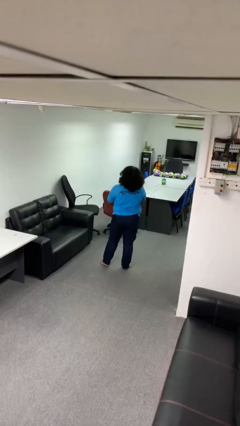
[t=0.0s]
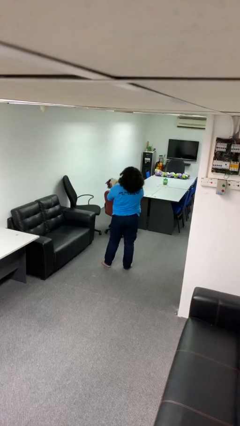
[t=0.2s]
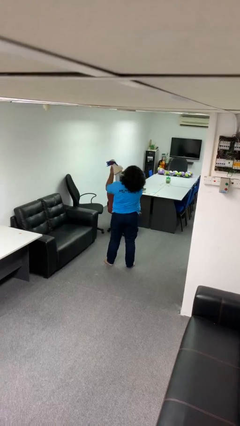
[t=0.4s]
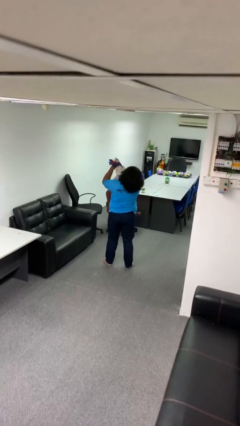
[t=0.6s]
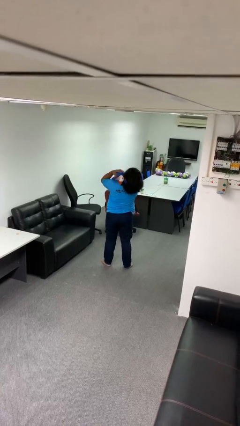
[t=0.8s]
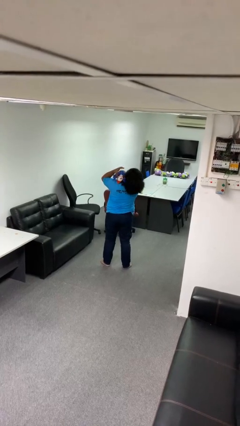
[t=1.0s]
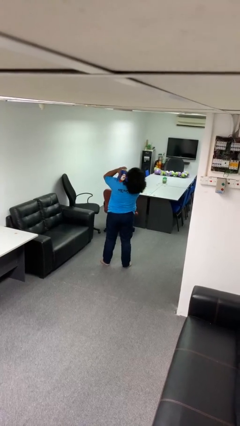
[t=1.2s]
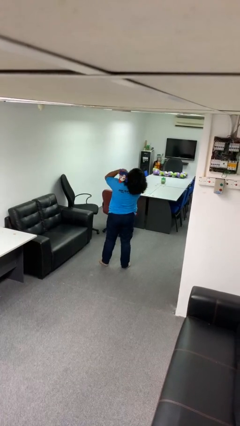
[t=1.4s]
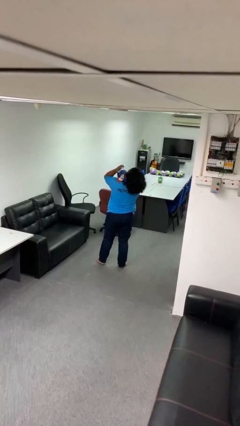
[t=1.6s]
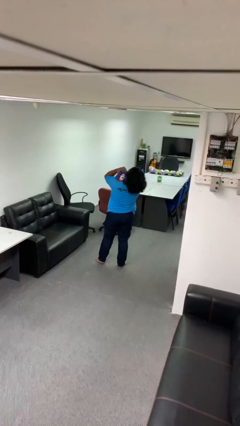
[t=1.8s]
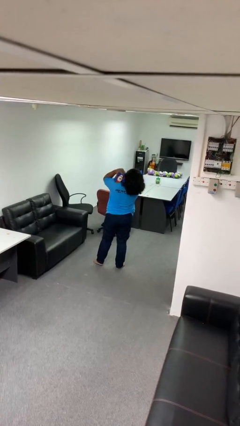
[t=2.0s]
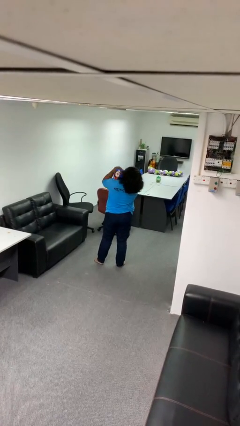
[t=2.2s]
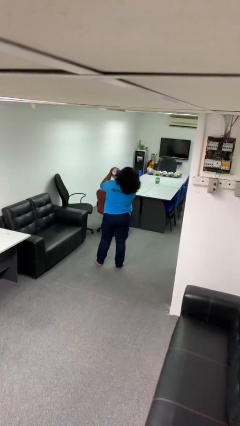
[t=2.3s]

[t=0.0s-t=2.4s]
person hugs stuffed animal

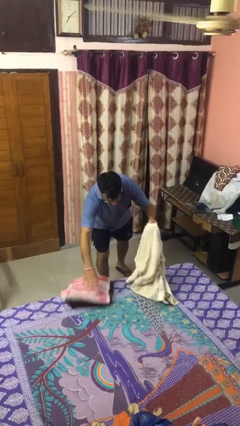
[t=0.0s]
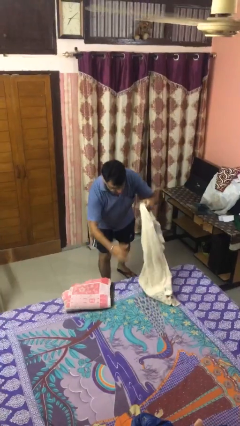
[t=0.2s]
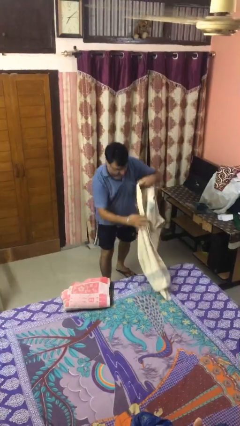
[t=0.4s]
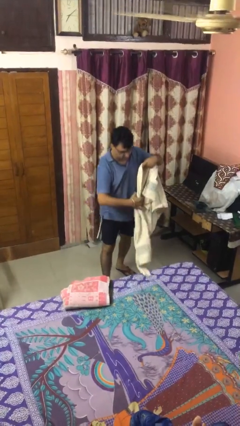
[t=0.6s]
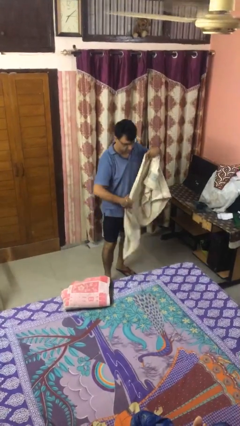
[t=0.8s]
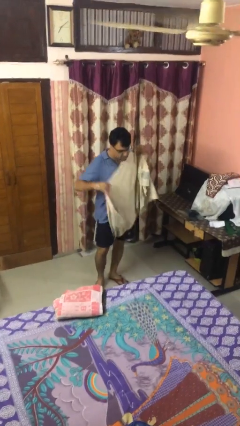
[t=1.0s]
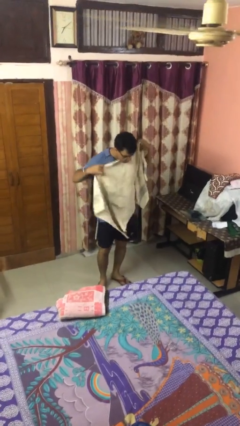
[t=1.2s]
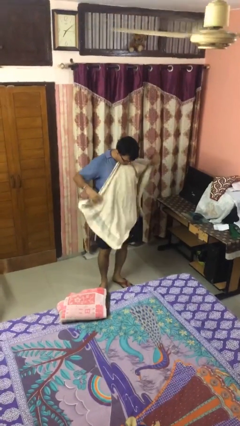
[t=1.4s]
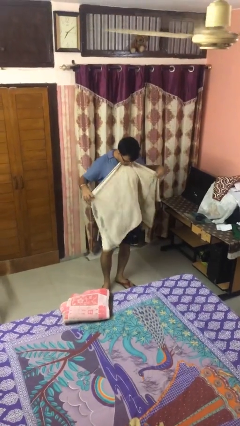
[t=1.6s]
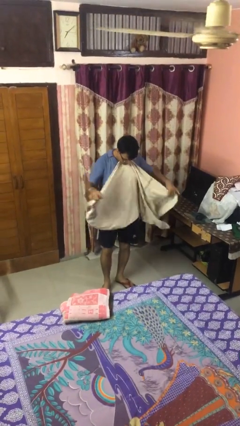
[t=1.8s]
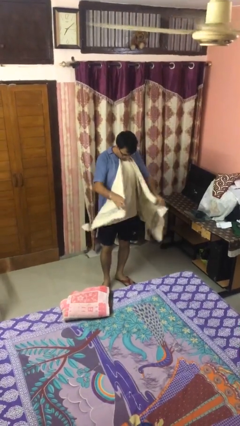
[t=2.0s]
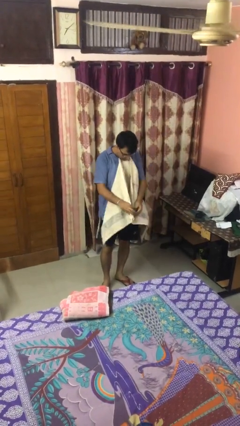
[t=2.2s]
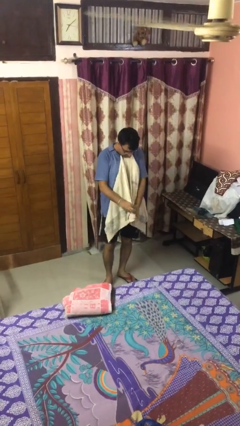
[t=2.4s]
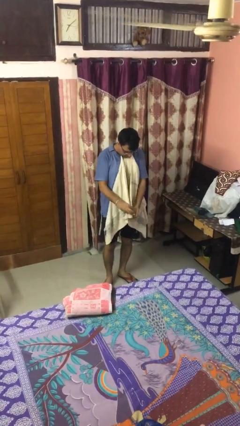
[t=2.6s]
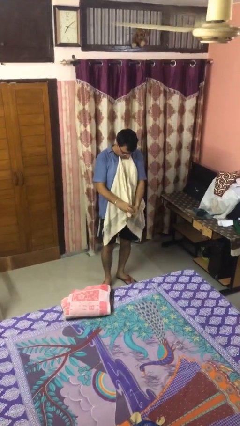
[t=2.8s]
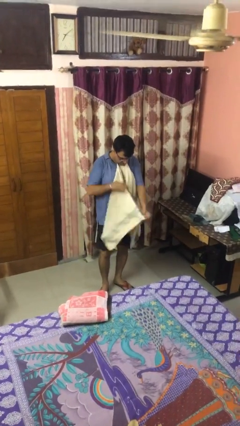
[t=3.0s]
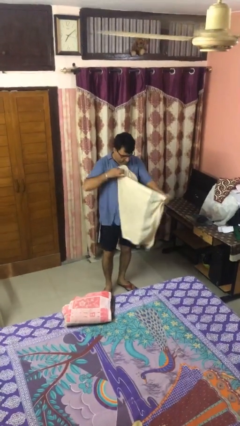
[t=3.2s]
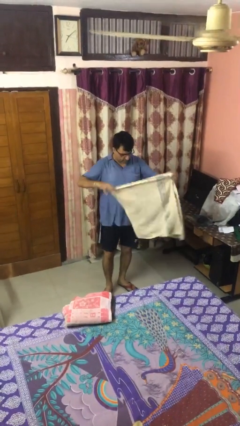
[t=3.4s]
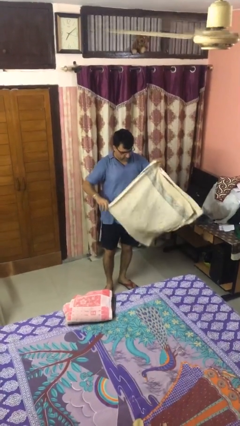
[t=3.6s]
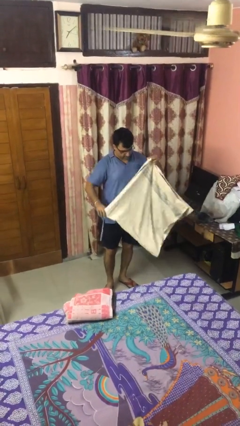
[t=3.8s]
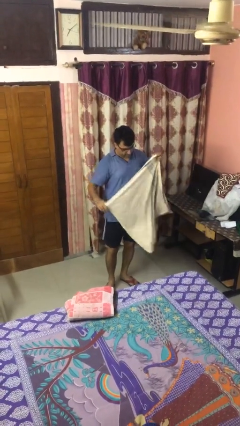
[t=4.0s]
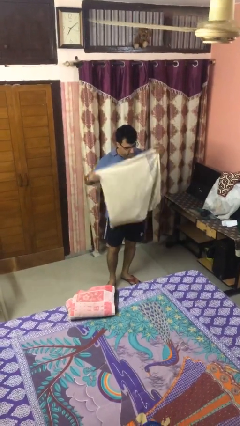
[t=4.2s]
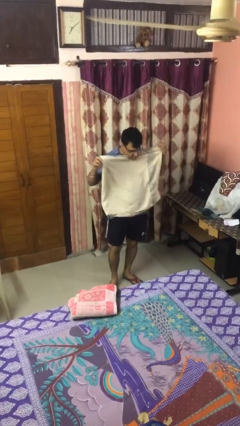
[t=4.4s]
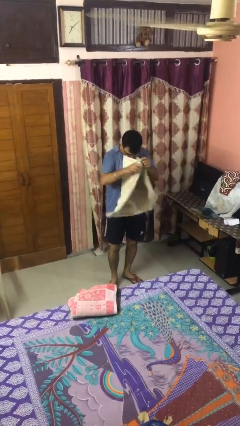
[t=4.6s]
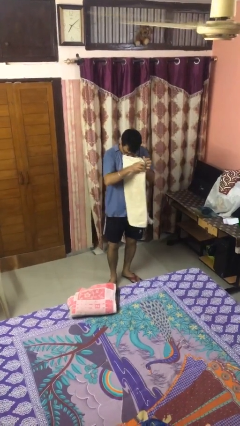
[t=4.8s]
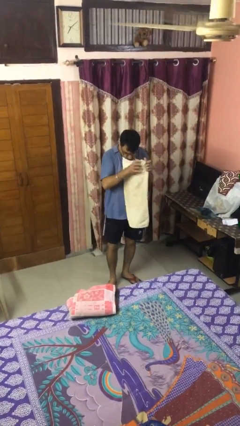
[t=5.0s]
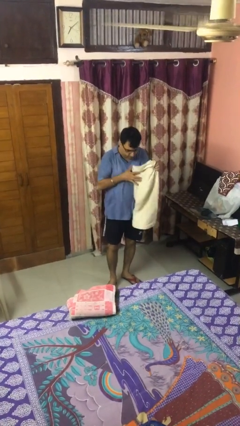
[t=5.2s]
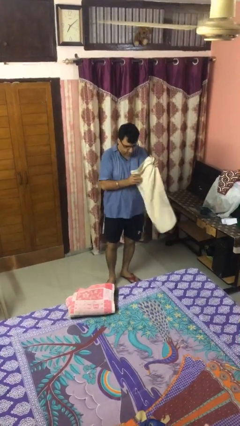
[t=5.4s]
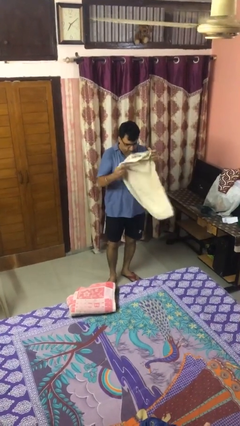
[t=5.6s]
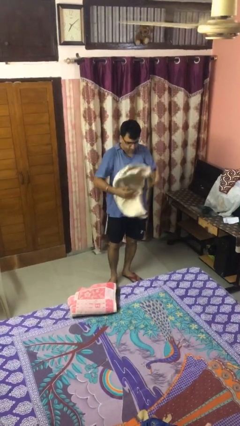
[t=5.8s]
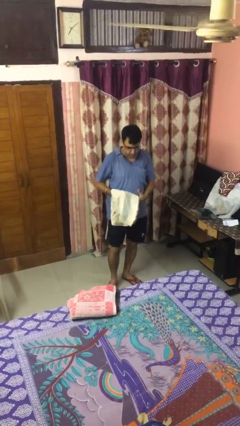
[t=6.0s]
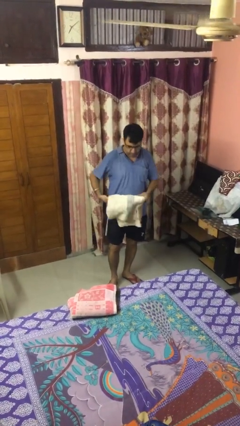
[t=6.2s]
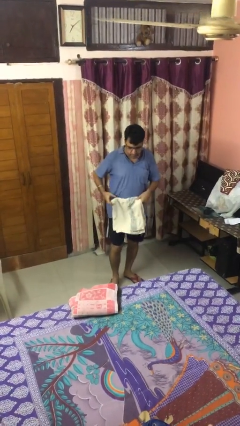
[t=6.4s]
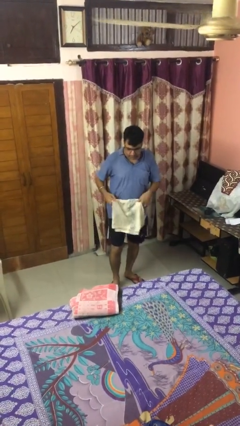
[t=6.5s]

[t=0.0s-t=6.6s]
person folds towel

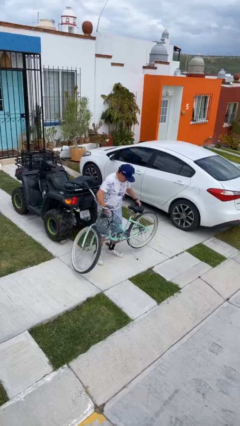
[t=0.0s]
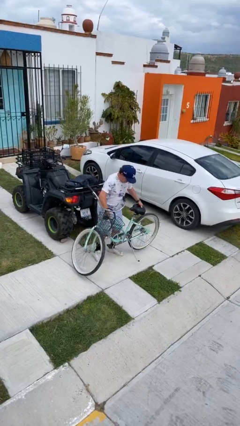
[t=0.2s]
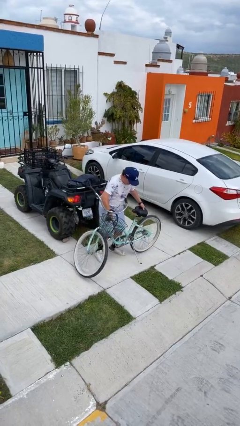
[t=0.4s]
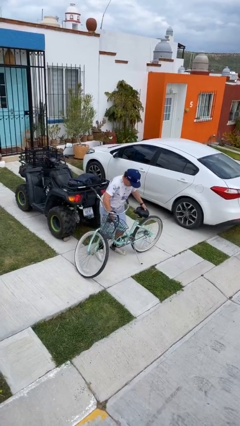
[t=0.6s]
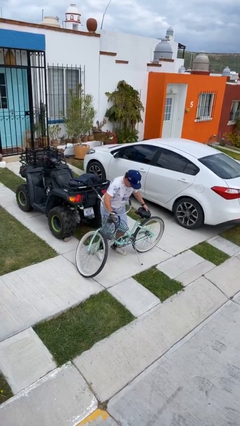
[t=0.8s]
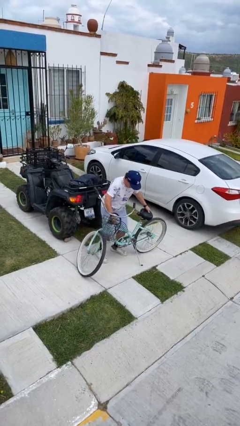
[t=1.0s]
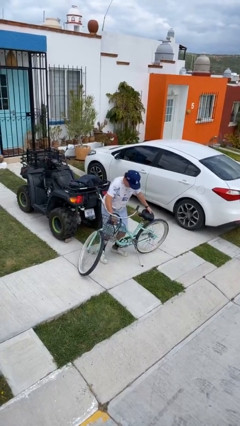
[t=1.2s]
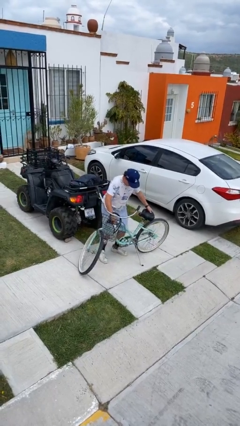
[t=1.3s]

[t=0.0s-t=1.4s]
person puts down object on floor

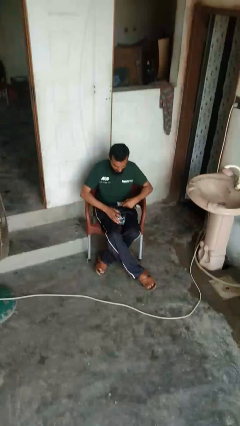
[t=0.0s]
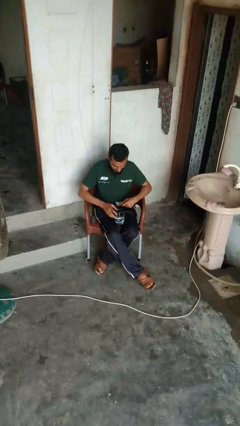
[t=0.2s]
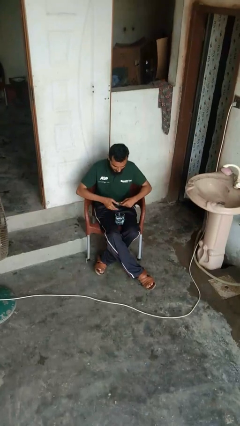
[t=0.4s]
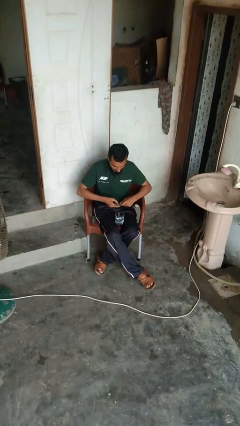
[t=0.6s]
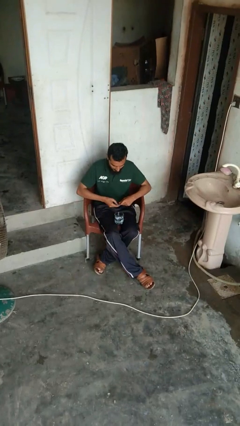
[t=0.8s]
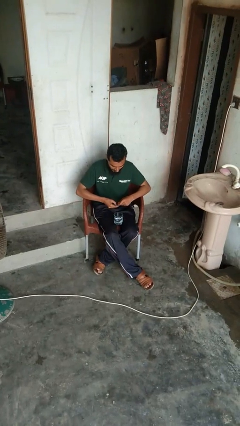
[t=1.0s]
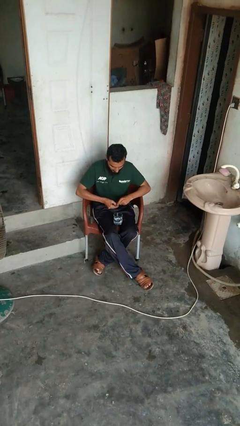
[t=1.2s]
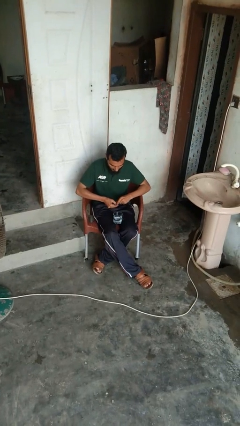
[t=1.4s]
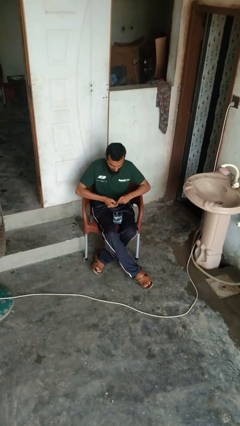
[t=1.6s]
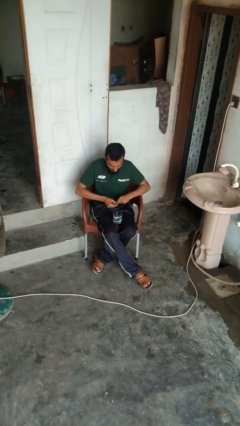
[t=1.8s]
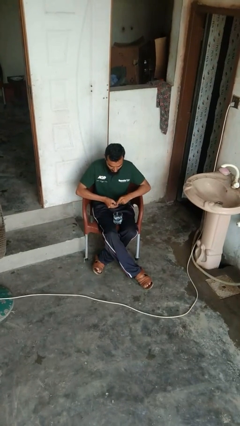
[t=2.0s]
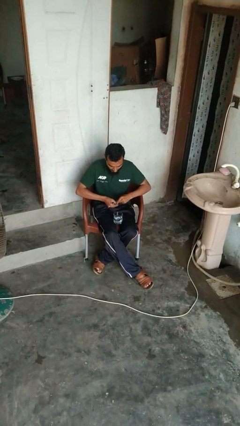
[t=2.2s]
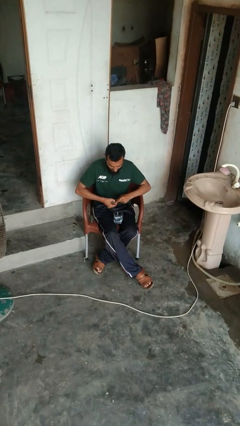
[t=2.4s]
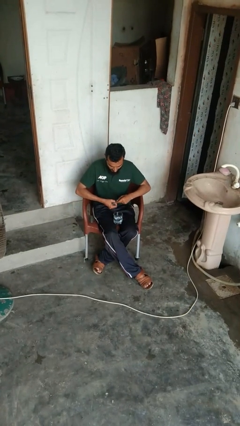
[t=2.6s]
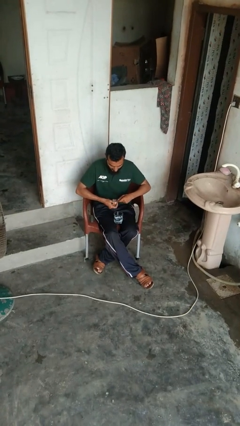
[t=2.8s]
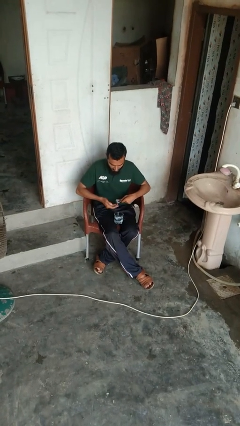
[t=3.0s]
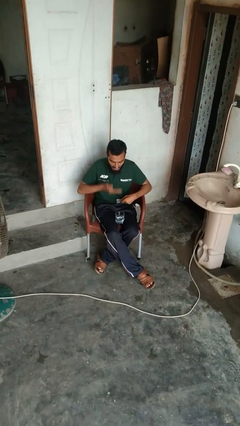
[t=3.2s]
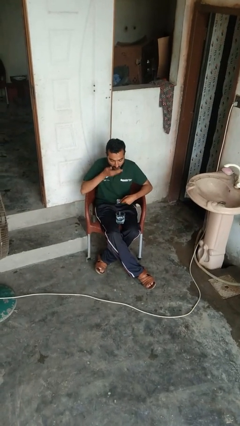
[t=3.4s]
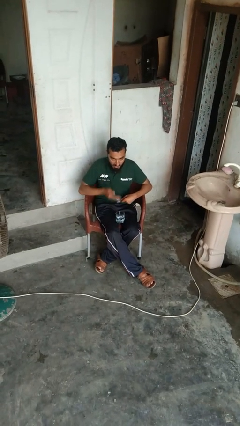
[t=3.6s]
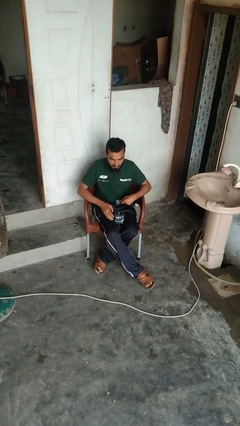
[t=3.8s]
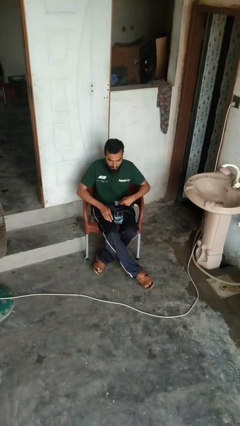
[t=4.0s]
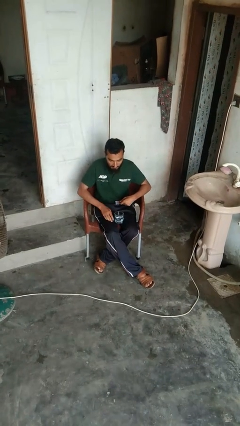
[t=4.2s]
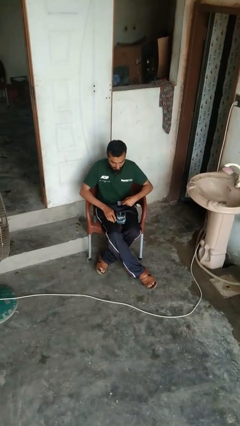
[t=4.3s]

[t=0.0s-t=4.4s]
person takes medicine pills

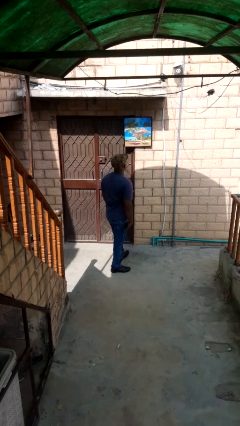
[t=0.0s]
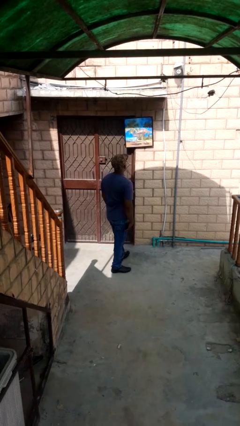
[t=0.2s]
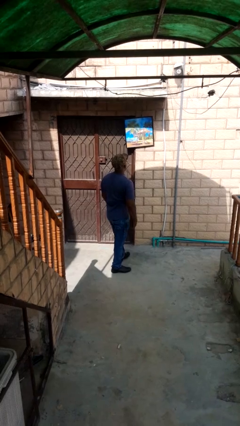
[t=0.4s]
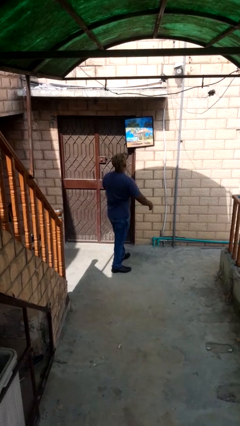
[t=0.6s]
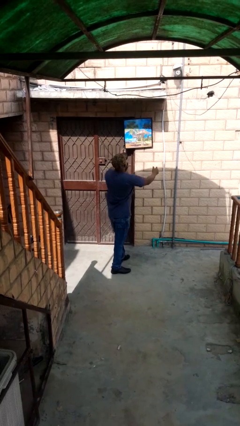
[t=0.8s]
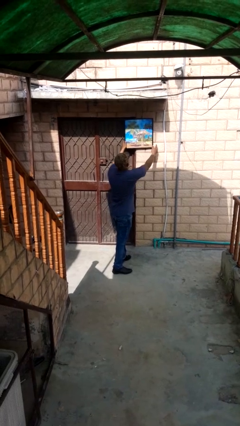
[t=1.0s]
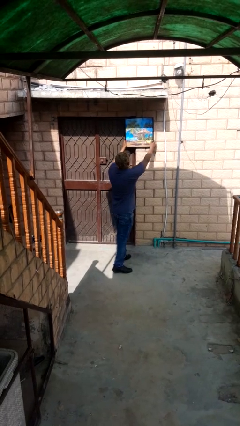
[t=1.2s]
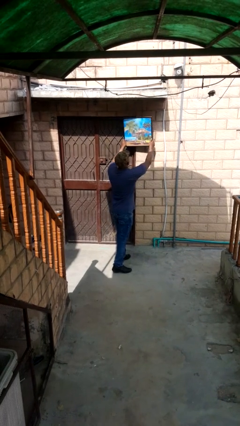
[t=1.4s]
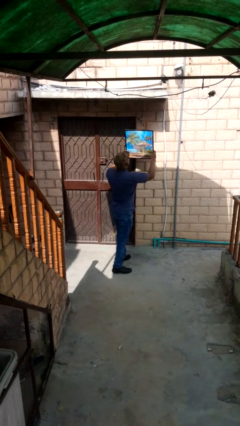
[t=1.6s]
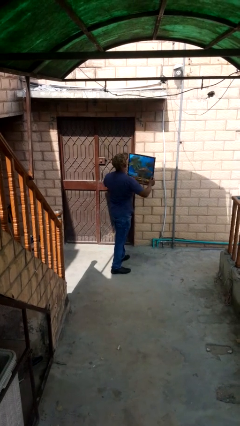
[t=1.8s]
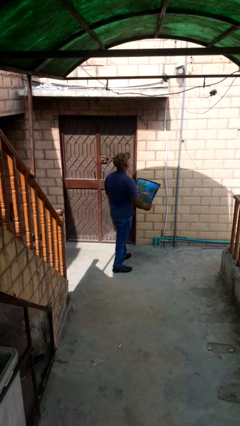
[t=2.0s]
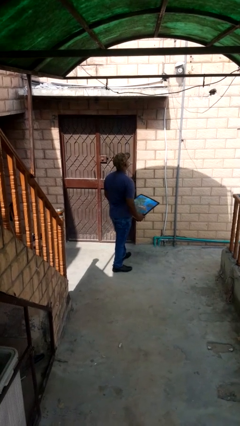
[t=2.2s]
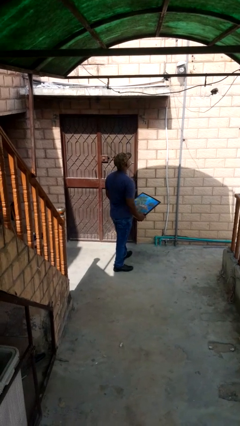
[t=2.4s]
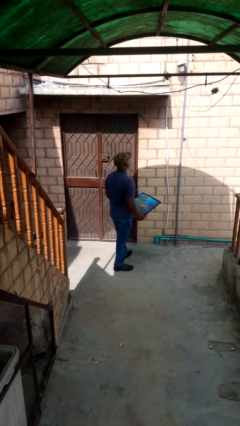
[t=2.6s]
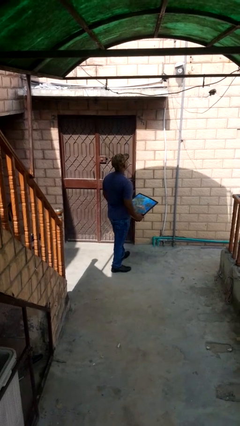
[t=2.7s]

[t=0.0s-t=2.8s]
person takes down picture frame
